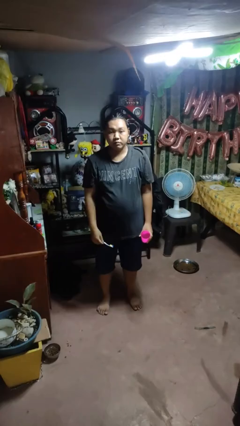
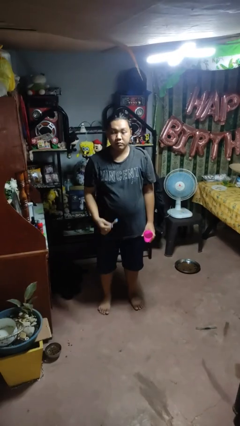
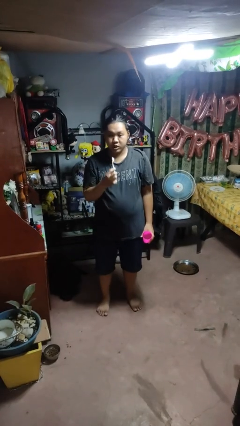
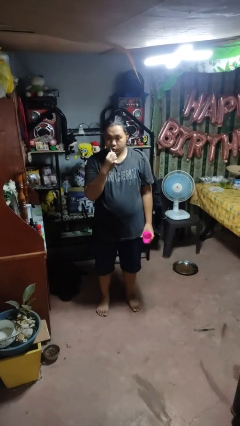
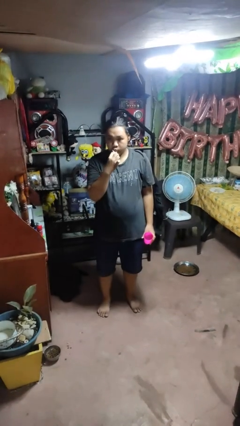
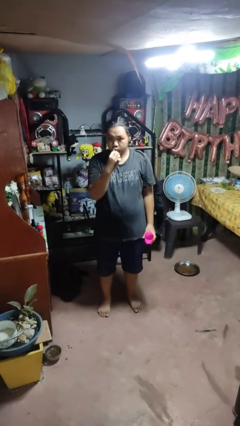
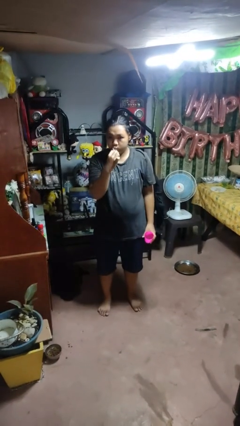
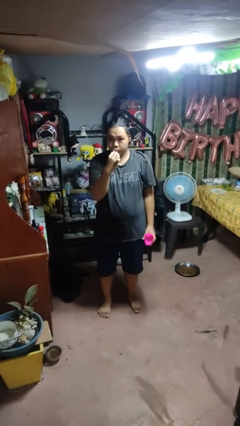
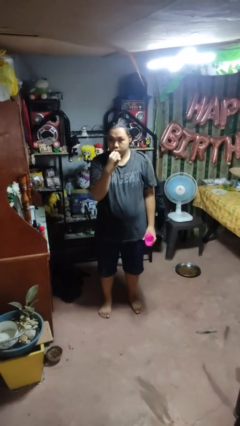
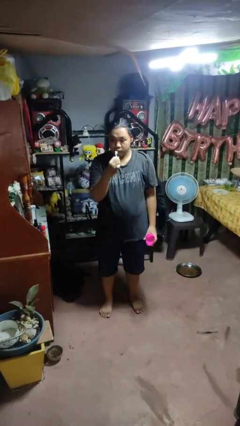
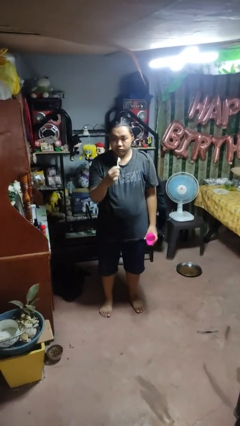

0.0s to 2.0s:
person brushes teeth

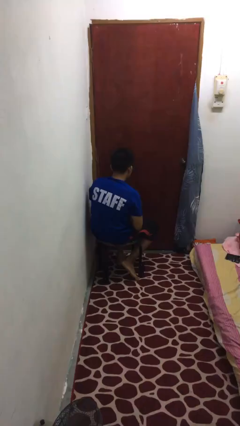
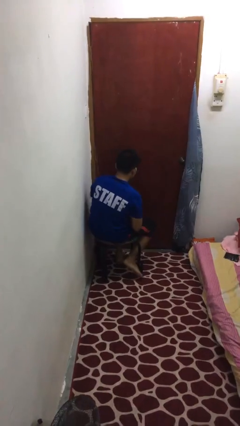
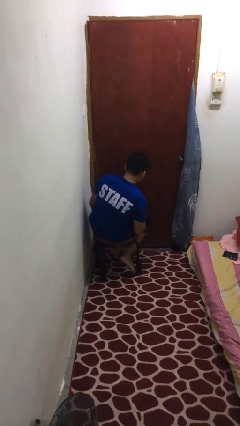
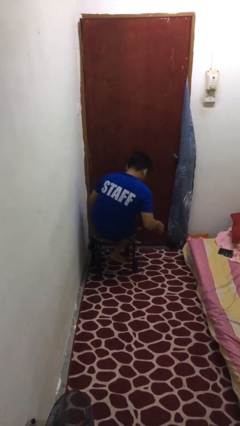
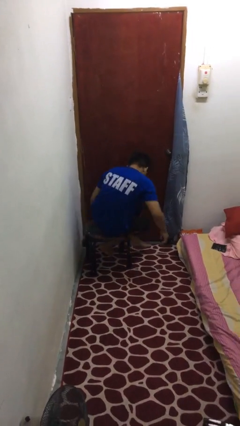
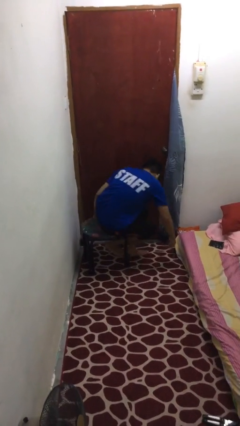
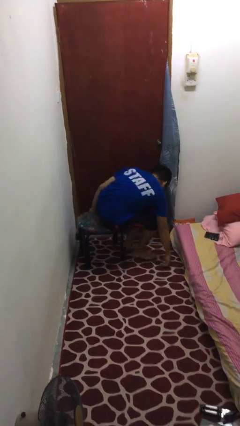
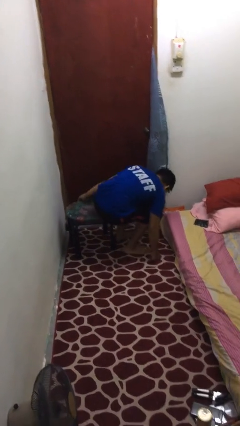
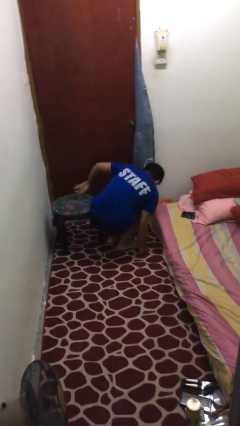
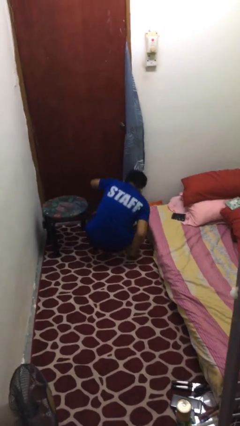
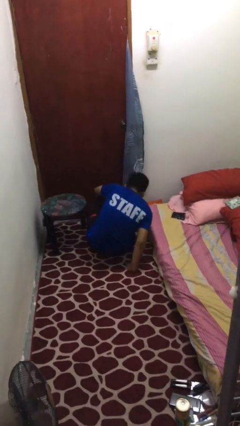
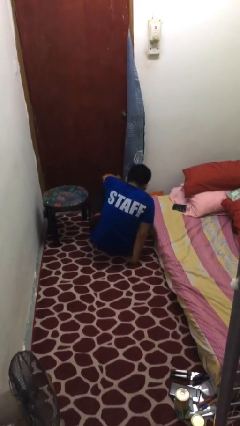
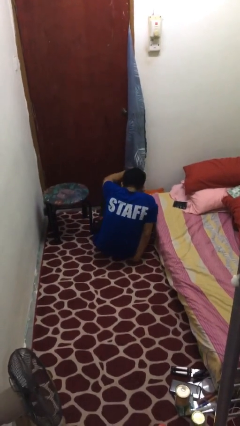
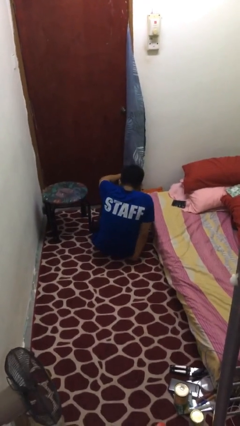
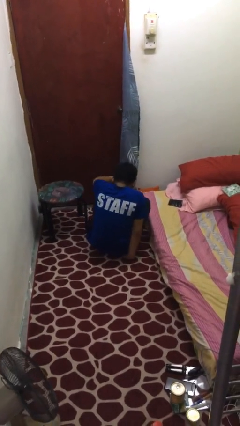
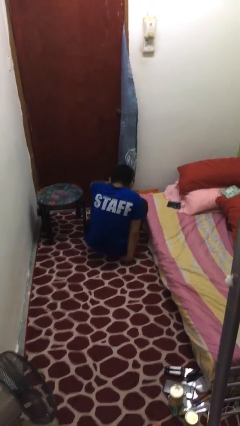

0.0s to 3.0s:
person falls from chair

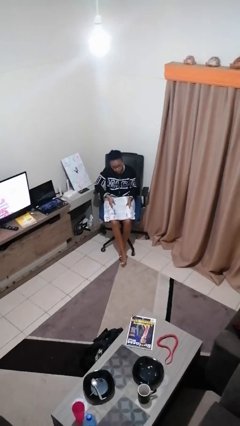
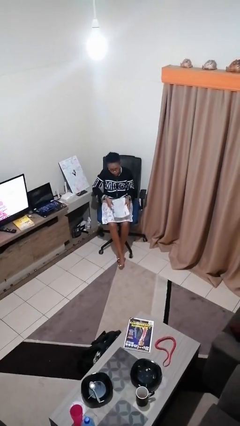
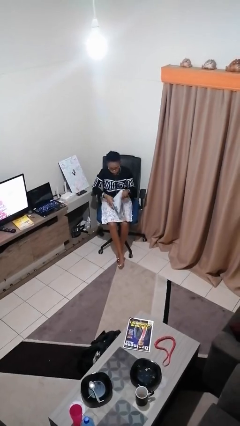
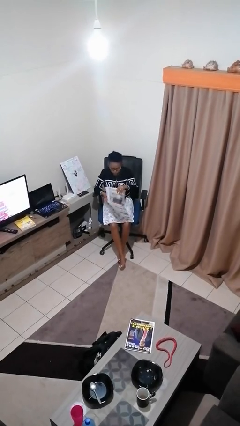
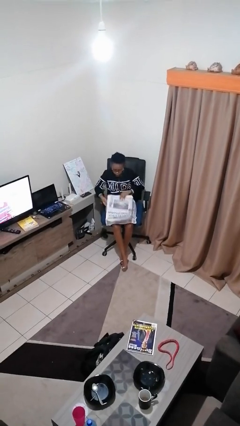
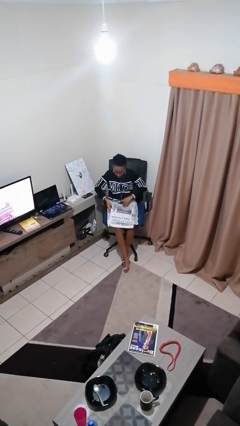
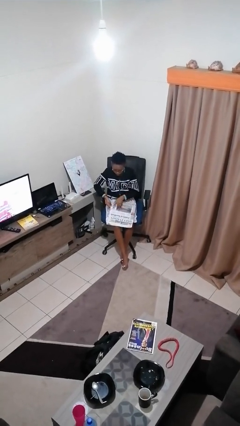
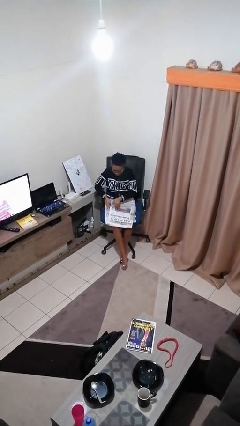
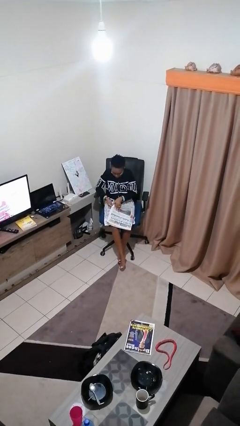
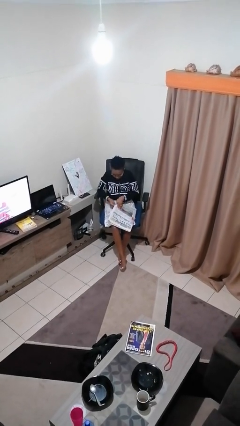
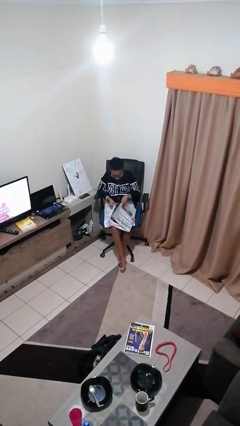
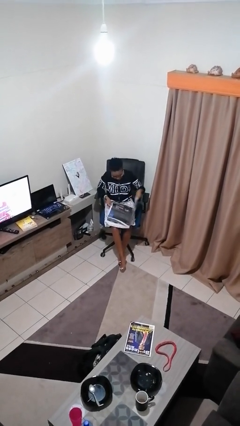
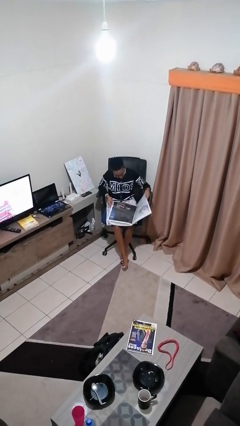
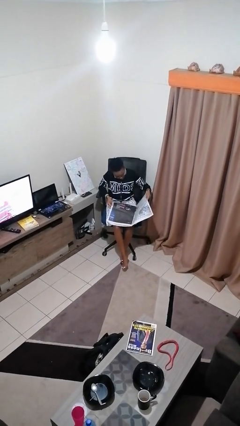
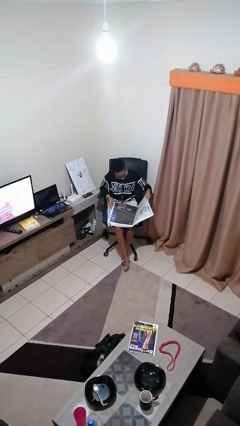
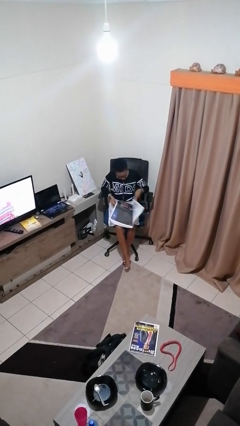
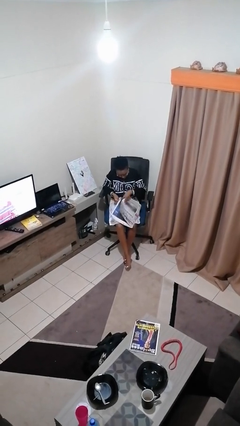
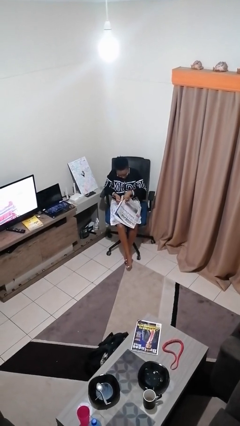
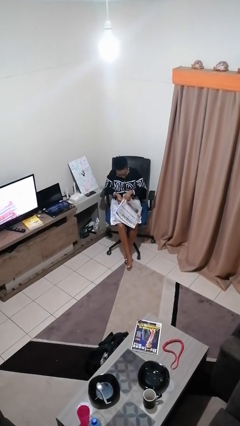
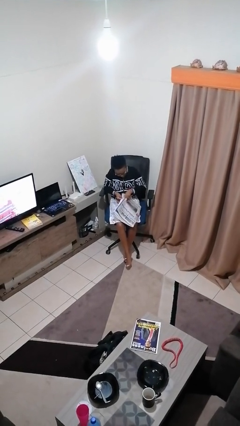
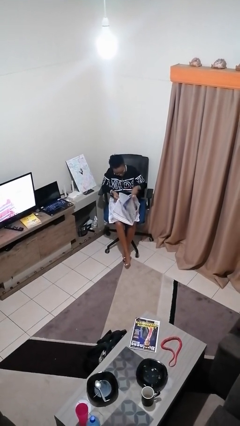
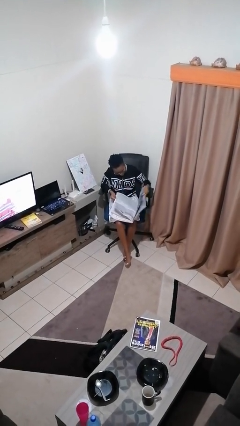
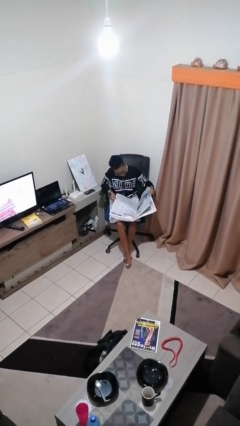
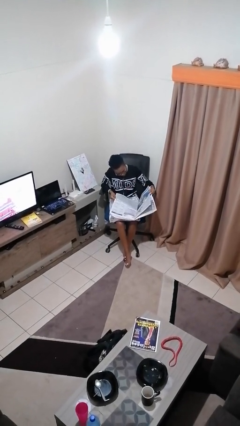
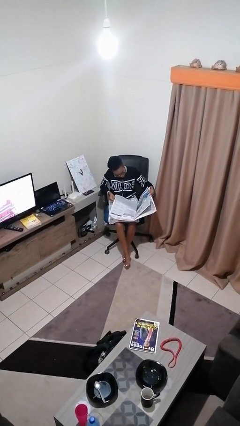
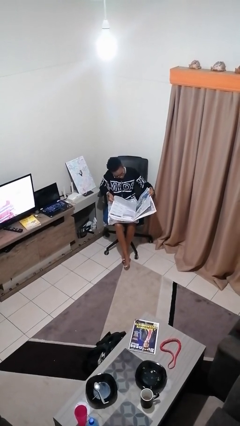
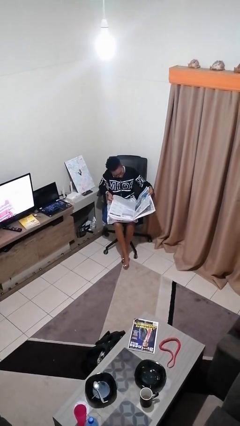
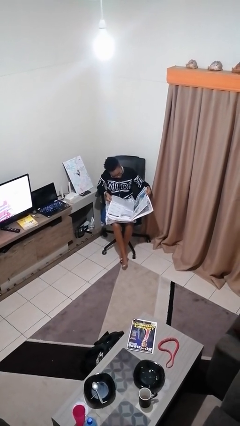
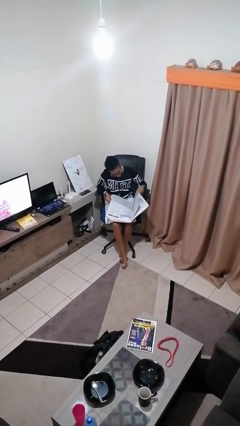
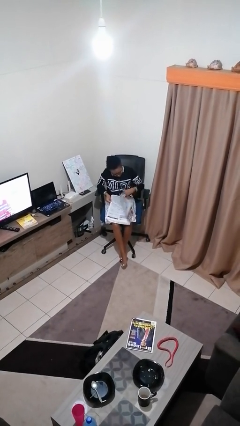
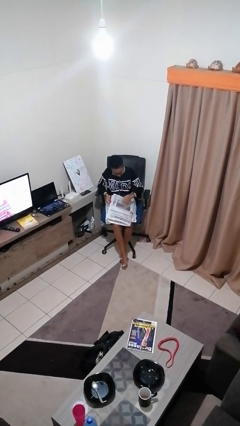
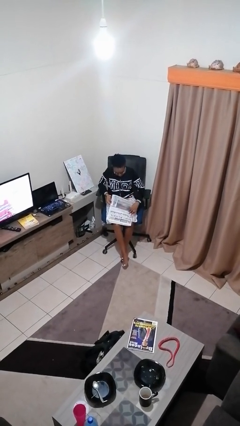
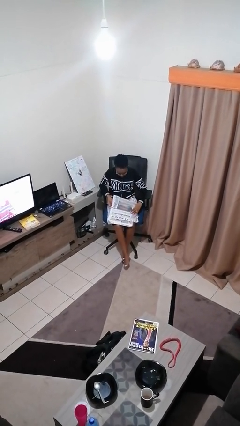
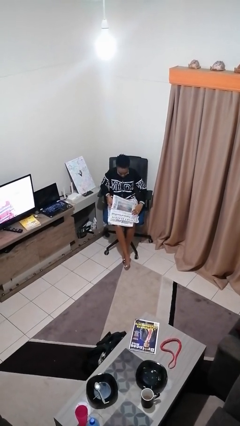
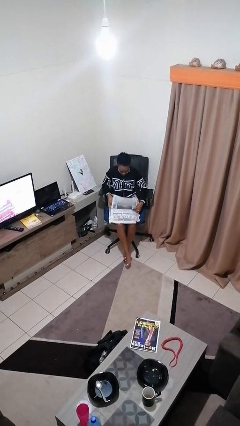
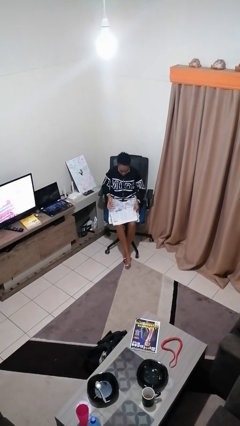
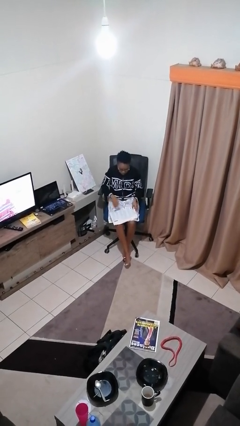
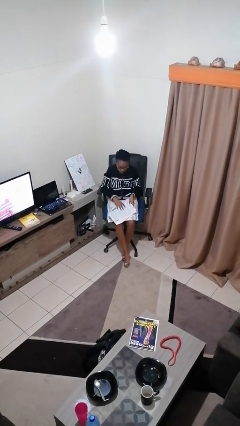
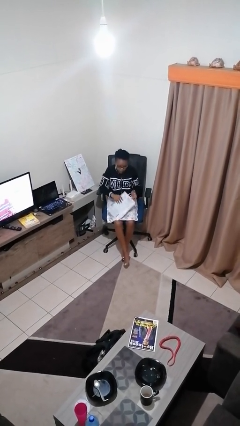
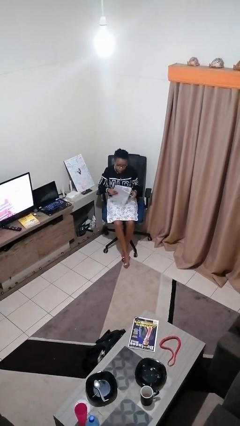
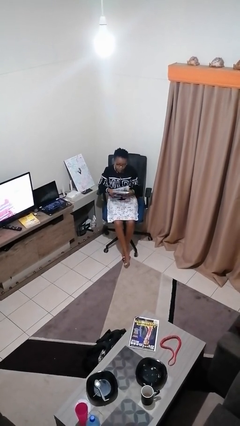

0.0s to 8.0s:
person reads newspaper

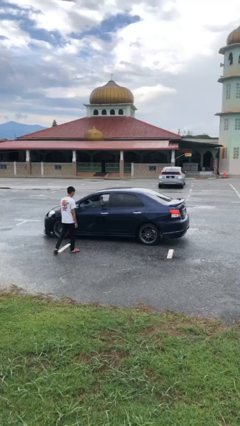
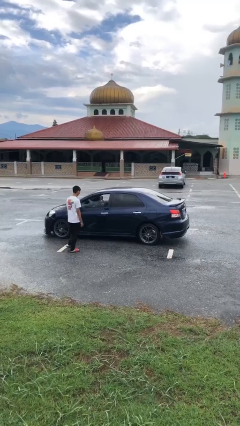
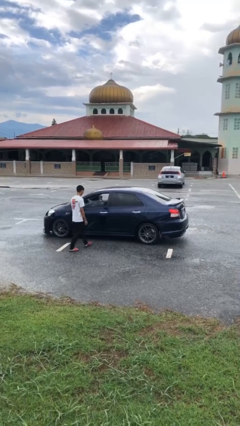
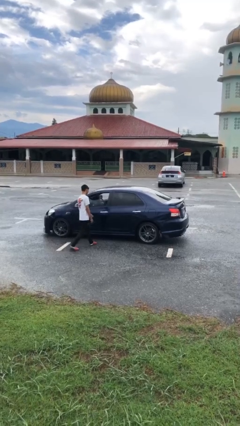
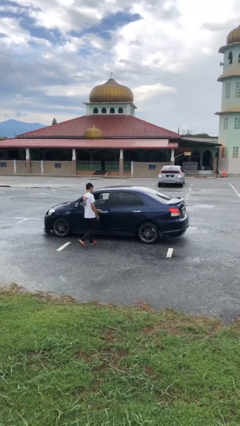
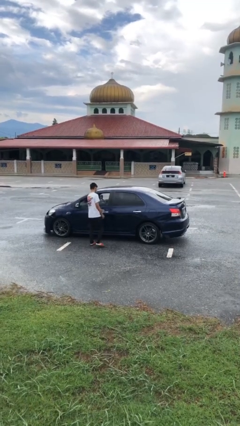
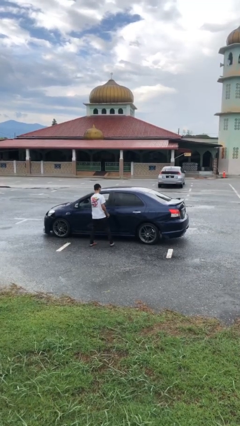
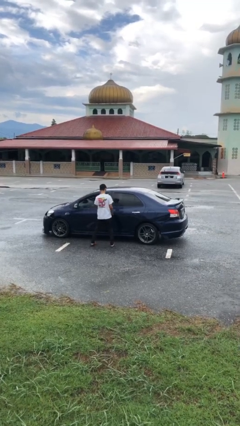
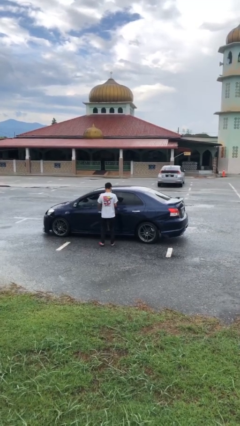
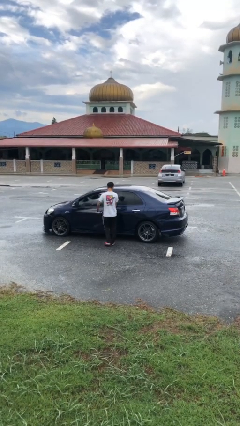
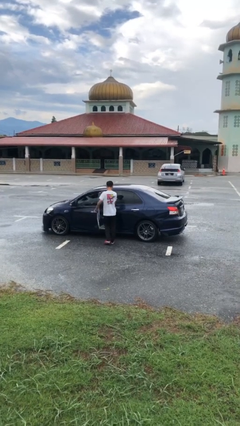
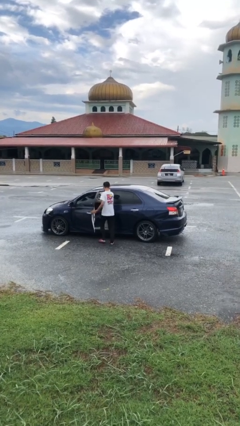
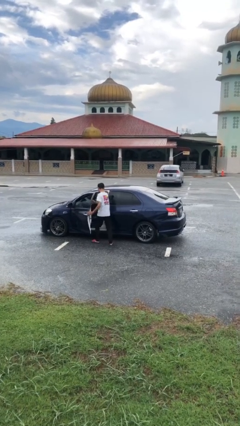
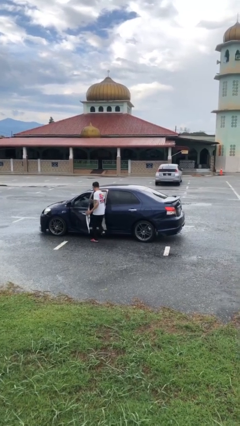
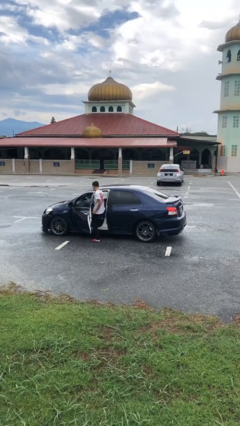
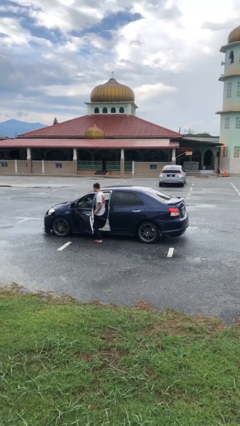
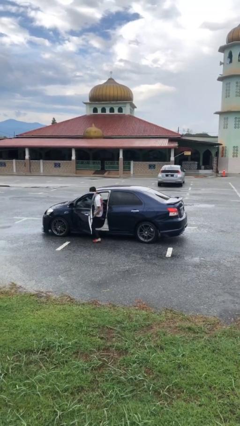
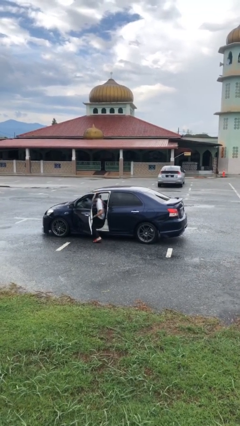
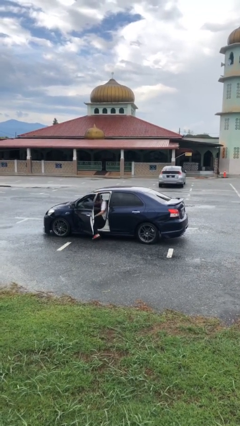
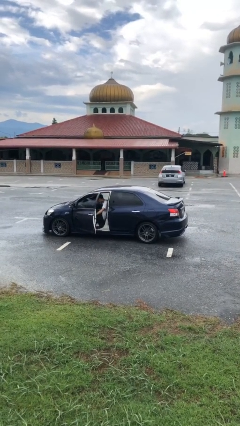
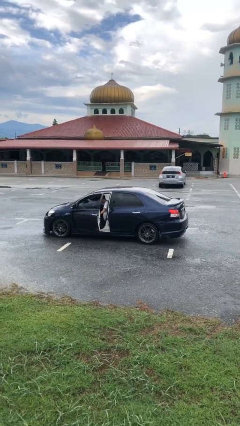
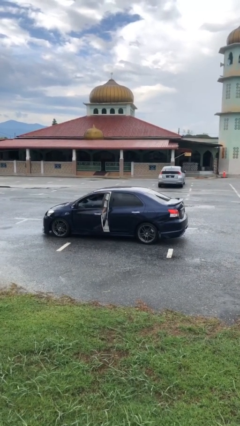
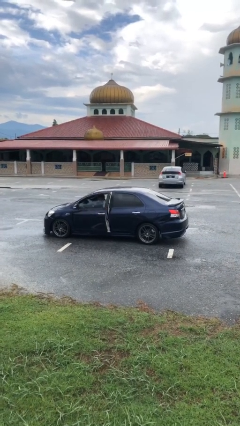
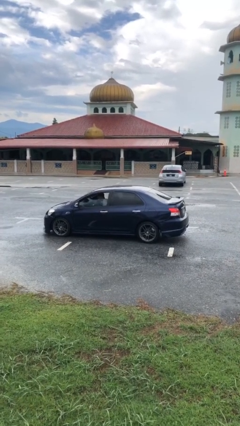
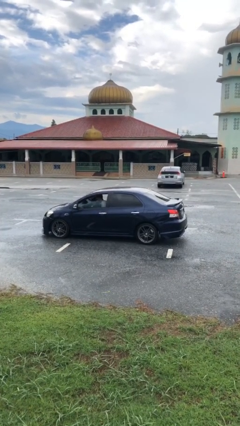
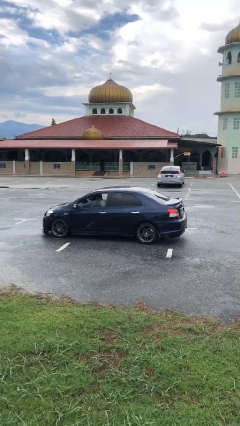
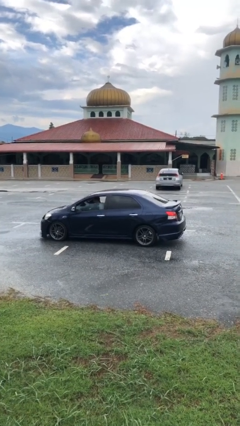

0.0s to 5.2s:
car picks up person
